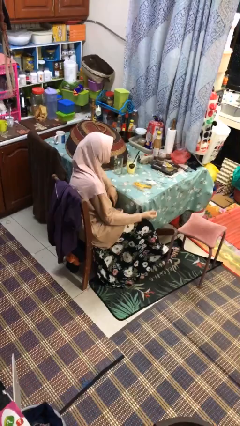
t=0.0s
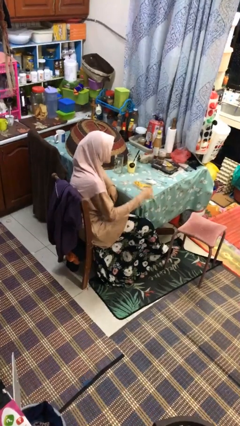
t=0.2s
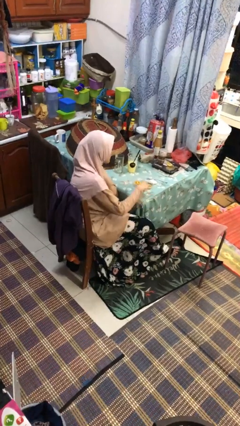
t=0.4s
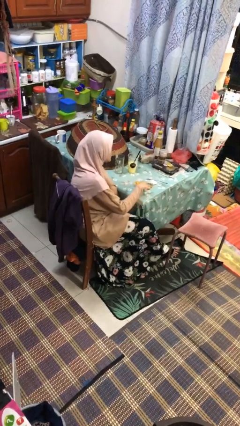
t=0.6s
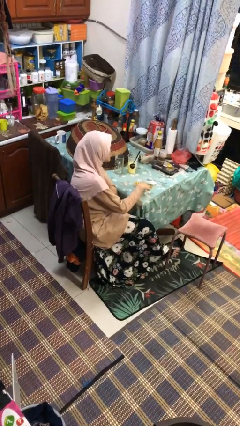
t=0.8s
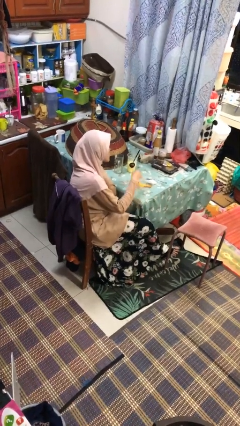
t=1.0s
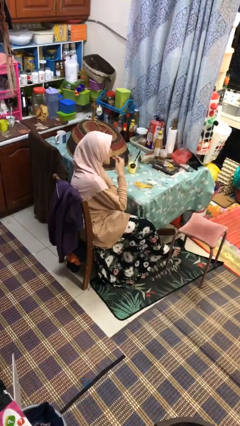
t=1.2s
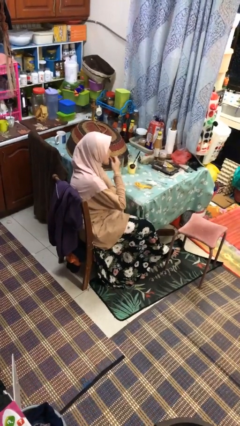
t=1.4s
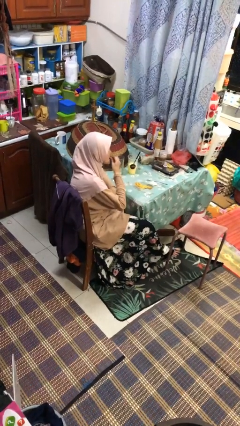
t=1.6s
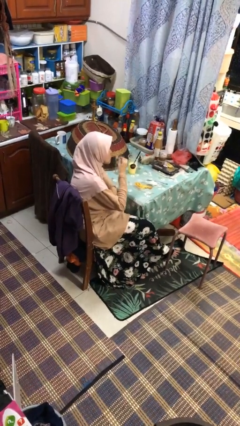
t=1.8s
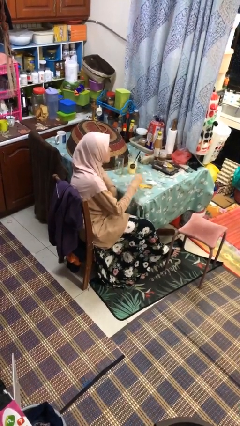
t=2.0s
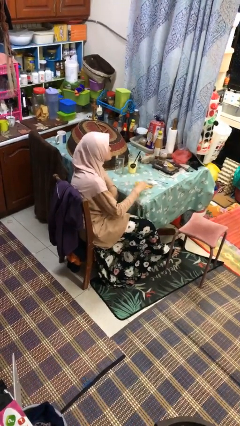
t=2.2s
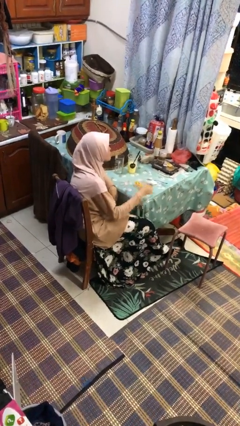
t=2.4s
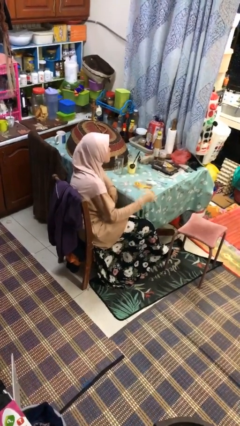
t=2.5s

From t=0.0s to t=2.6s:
person eats with hands

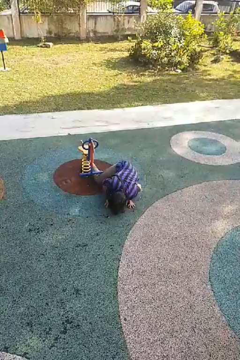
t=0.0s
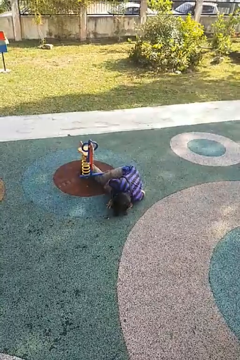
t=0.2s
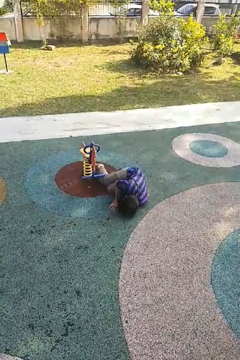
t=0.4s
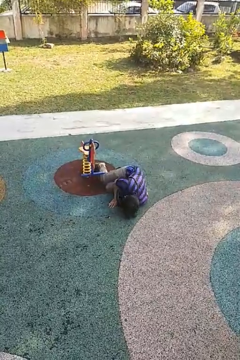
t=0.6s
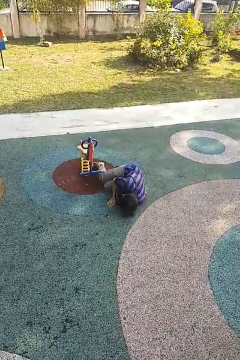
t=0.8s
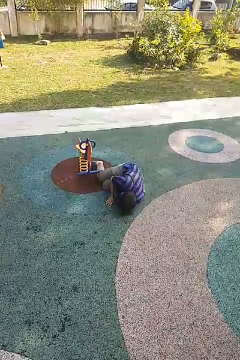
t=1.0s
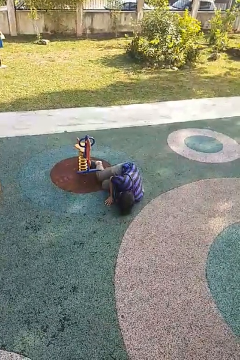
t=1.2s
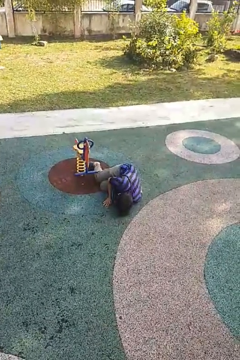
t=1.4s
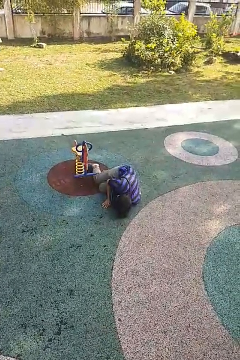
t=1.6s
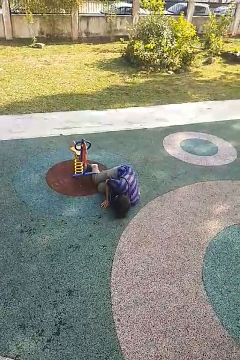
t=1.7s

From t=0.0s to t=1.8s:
person lies down on floor

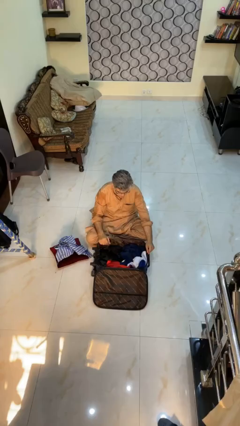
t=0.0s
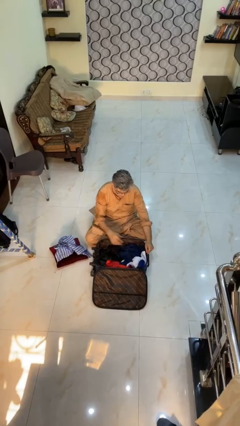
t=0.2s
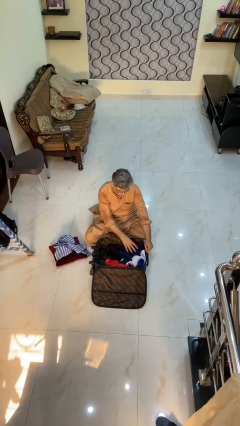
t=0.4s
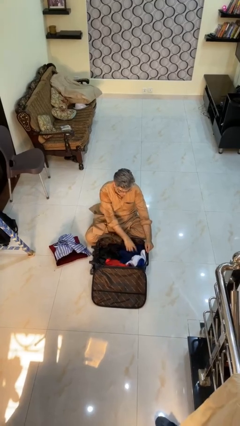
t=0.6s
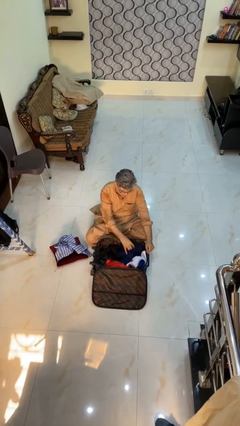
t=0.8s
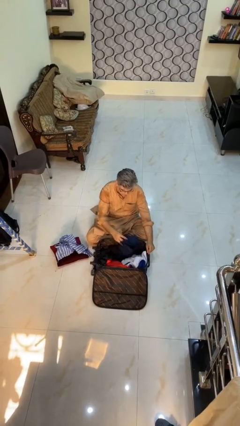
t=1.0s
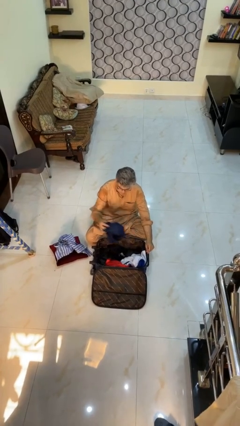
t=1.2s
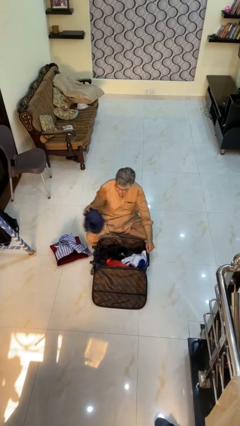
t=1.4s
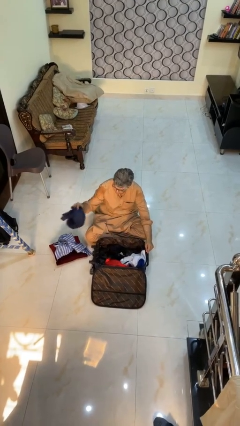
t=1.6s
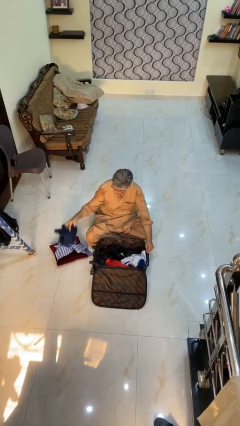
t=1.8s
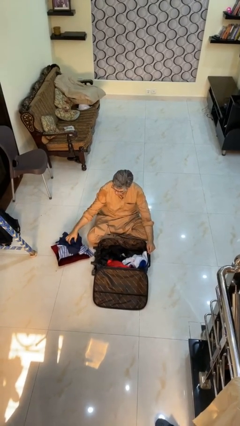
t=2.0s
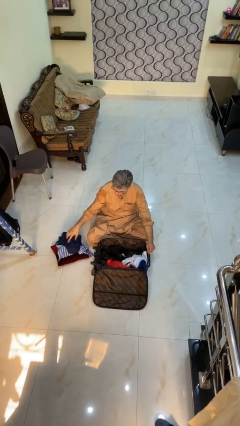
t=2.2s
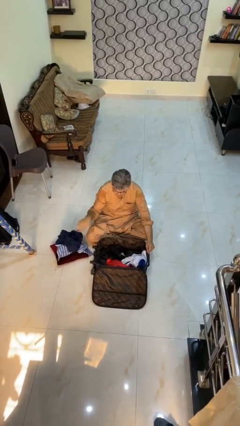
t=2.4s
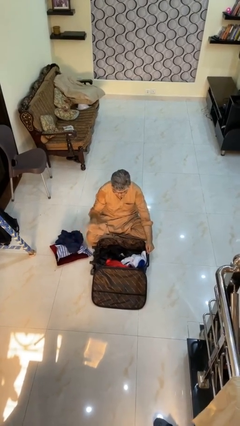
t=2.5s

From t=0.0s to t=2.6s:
person unloads clothes from suitcase

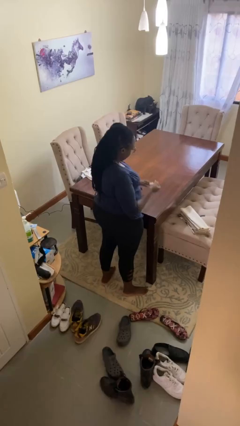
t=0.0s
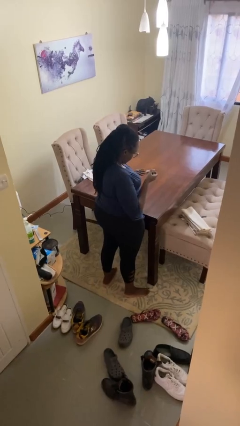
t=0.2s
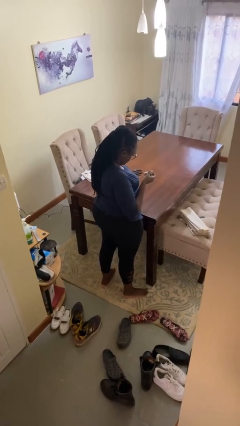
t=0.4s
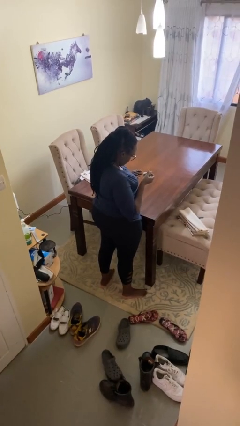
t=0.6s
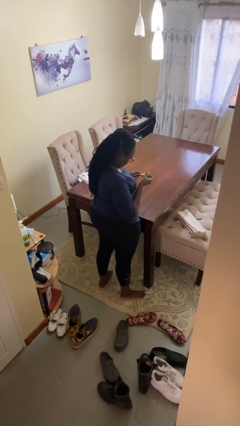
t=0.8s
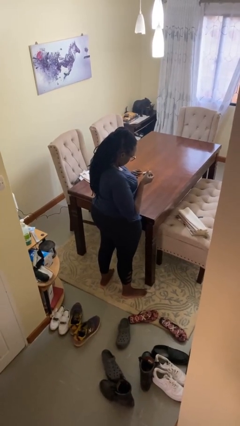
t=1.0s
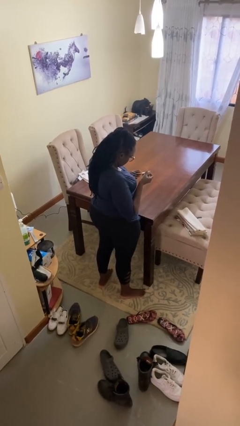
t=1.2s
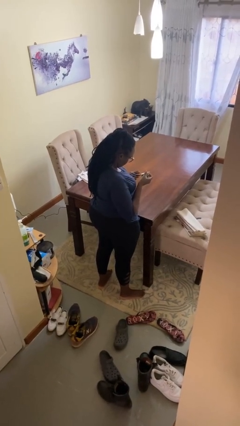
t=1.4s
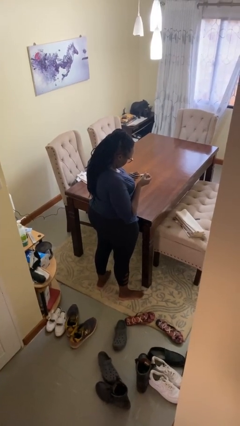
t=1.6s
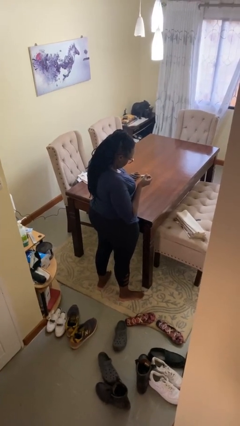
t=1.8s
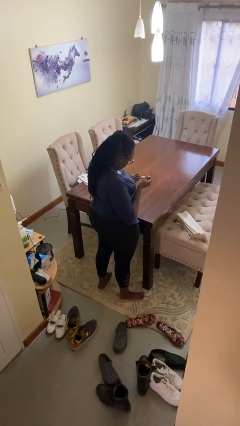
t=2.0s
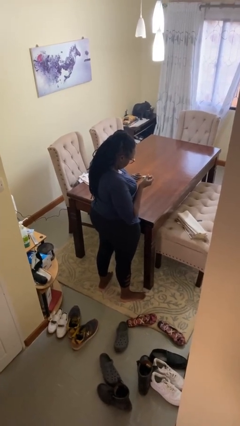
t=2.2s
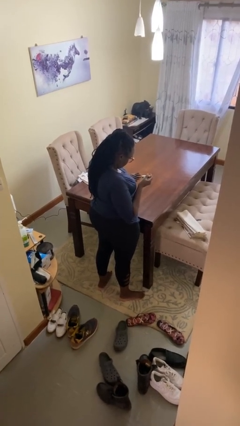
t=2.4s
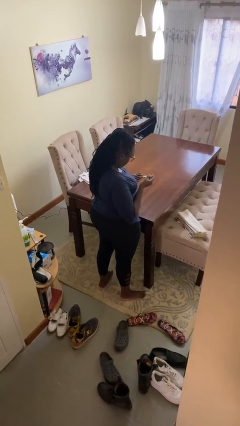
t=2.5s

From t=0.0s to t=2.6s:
person clips fingernails

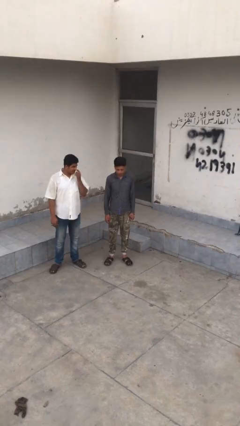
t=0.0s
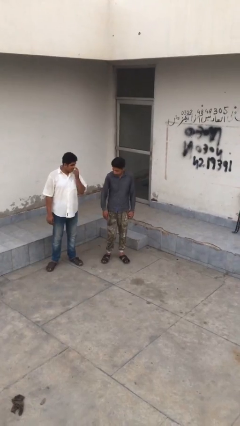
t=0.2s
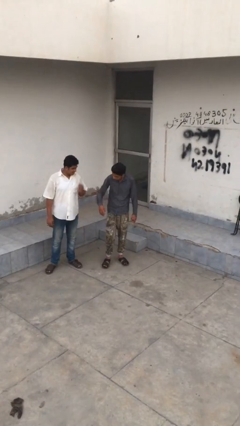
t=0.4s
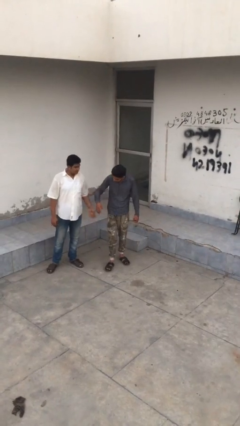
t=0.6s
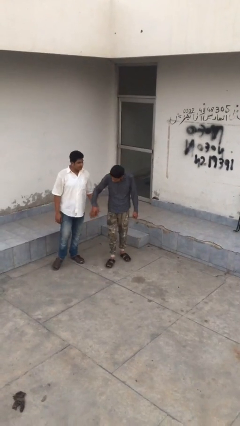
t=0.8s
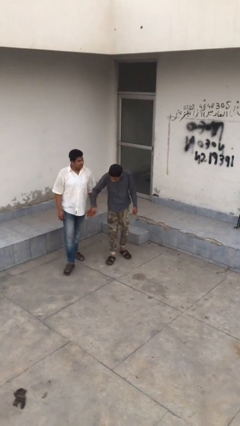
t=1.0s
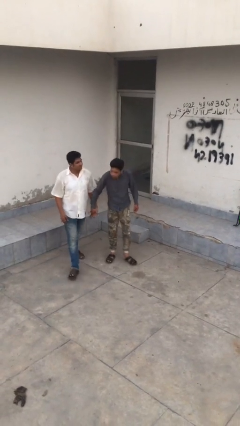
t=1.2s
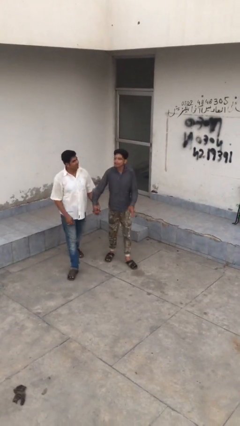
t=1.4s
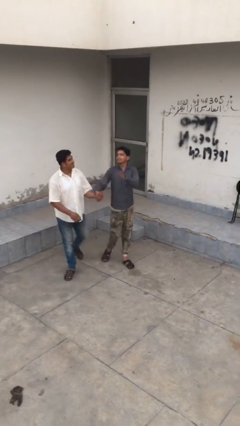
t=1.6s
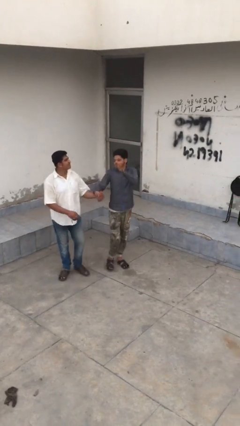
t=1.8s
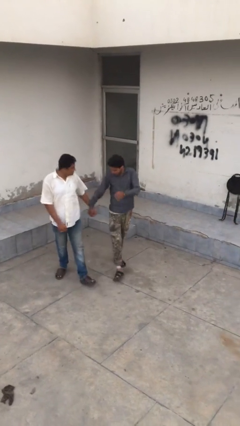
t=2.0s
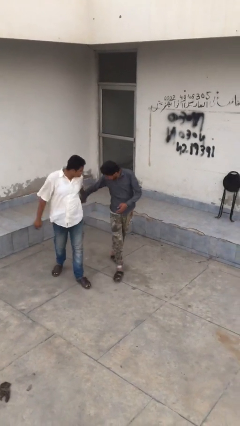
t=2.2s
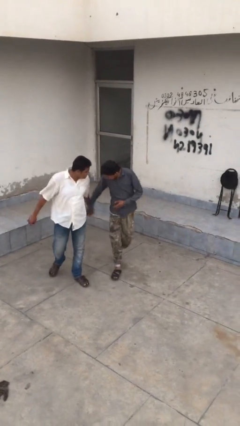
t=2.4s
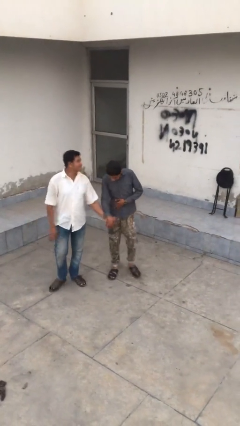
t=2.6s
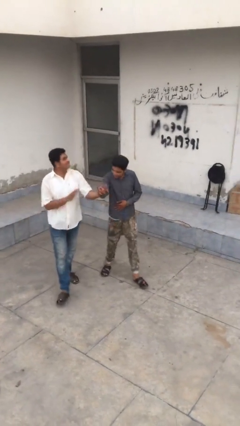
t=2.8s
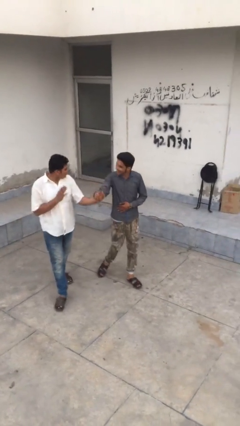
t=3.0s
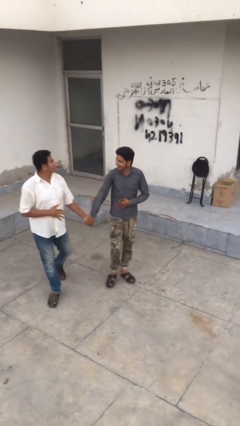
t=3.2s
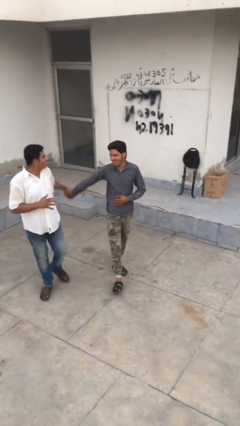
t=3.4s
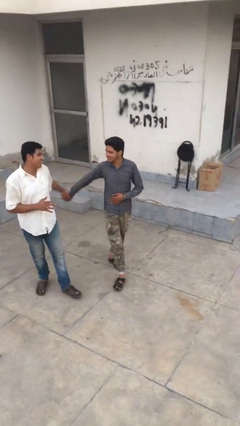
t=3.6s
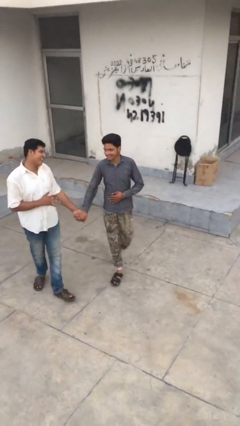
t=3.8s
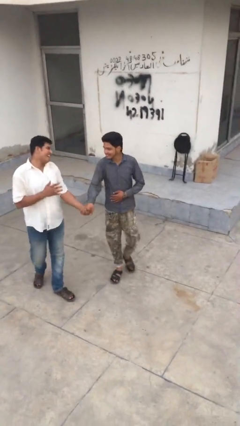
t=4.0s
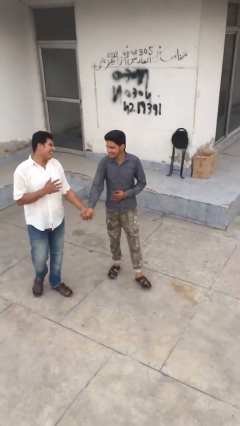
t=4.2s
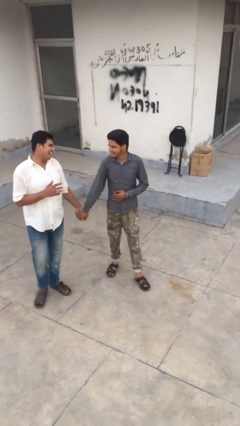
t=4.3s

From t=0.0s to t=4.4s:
person holds hand

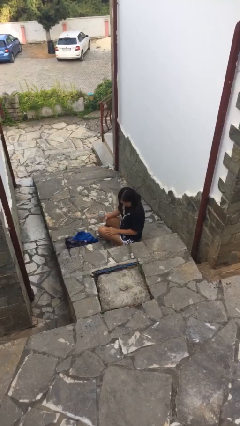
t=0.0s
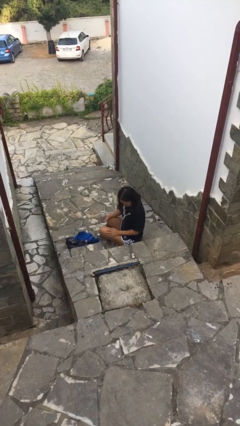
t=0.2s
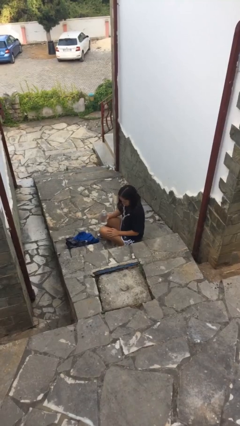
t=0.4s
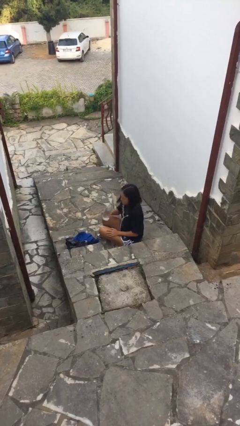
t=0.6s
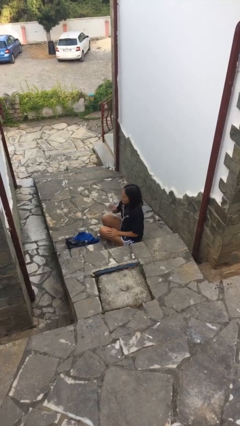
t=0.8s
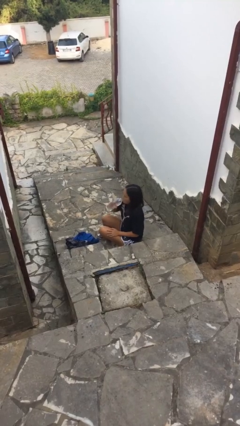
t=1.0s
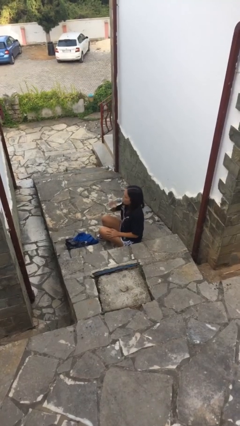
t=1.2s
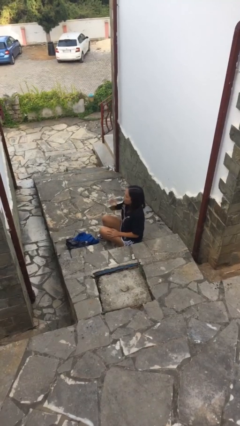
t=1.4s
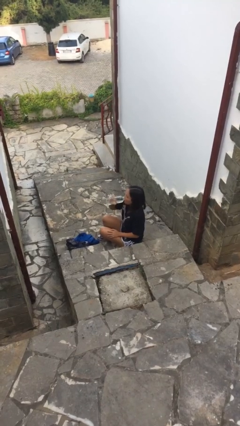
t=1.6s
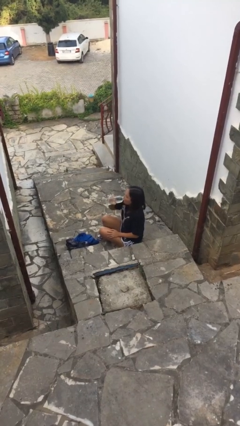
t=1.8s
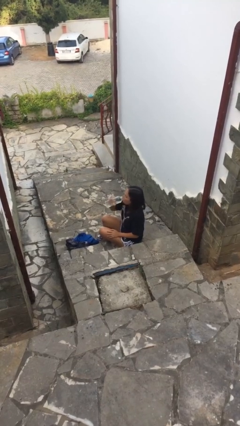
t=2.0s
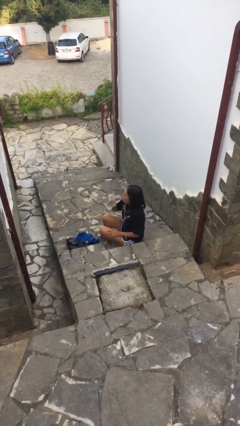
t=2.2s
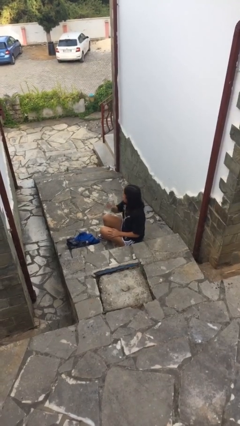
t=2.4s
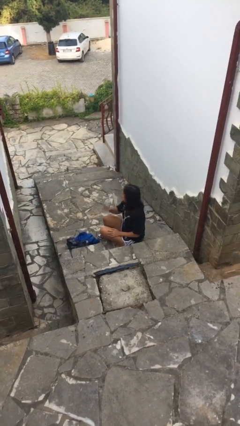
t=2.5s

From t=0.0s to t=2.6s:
person drinks from bottle

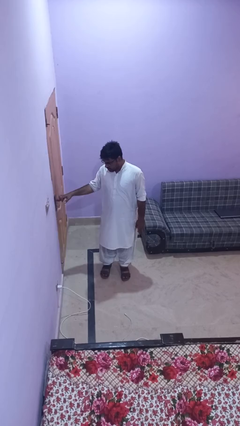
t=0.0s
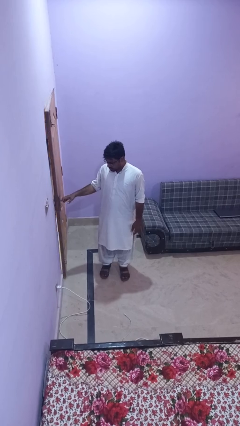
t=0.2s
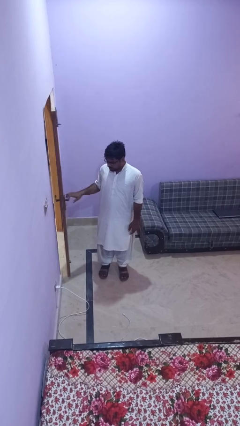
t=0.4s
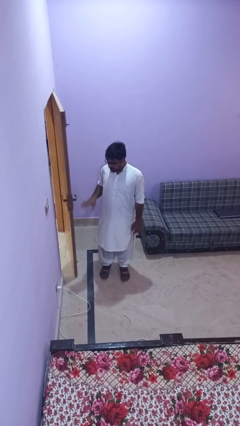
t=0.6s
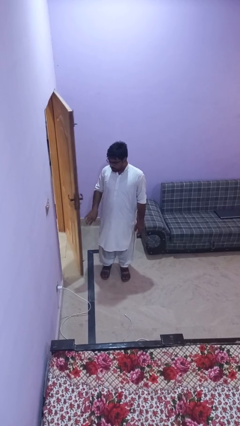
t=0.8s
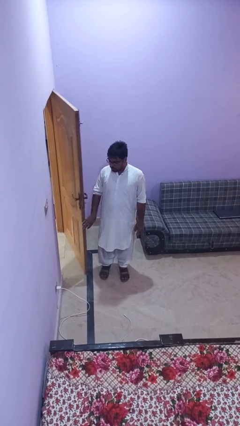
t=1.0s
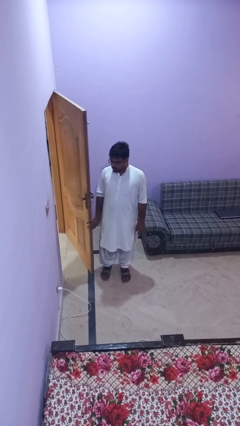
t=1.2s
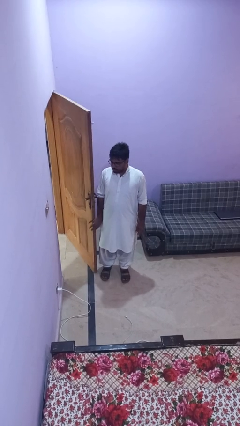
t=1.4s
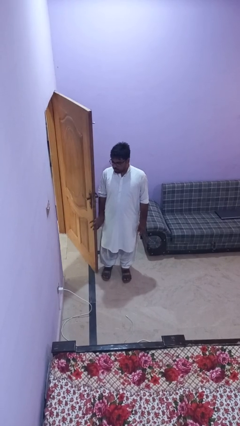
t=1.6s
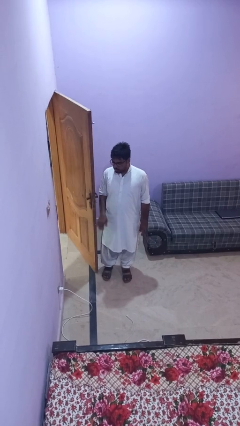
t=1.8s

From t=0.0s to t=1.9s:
person opens facility door
